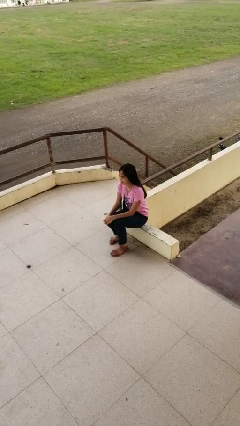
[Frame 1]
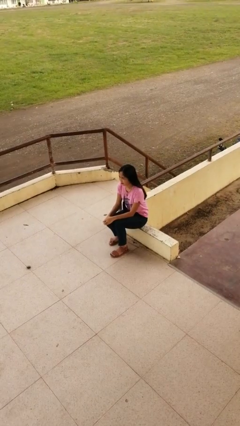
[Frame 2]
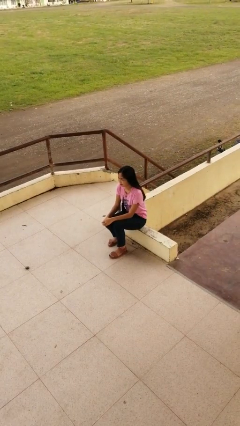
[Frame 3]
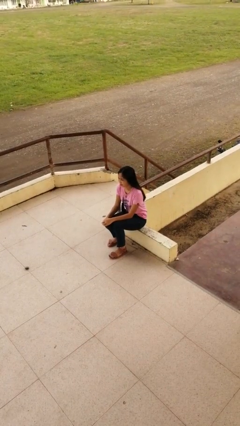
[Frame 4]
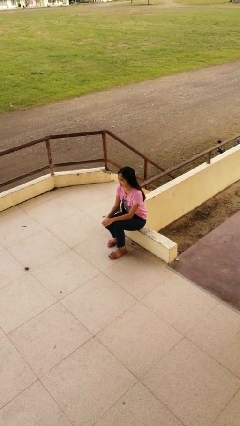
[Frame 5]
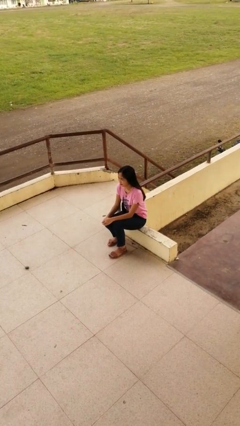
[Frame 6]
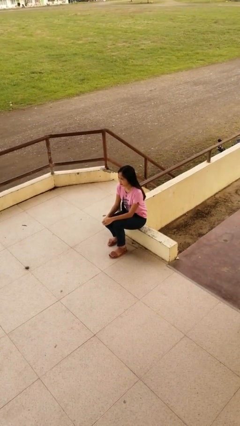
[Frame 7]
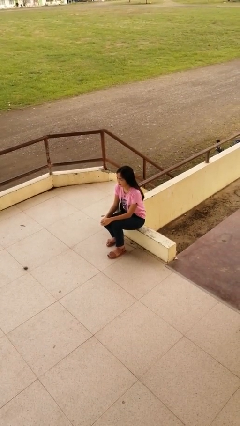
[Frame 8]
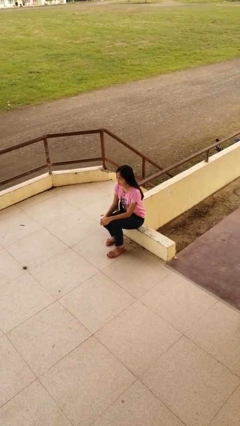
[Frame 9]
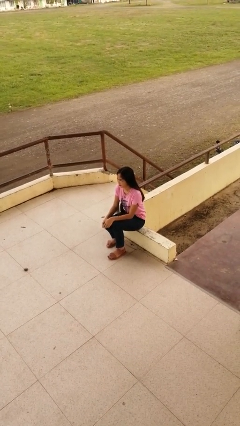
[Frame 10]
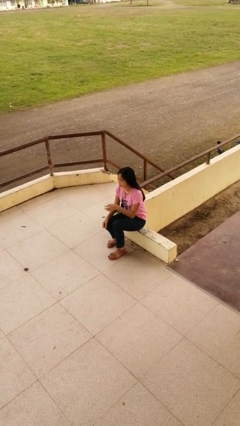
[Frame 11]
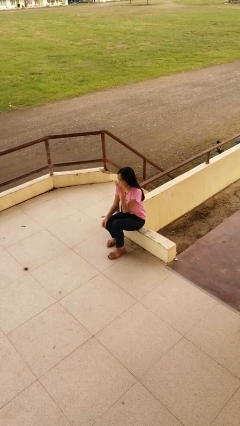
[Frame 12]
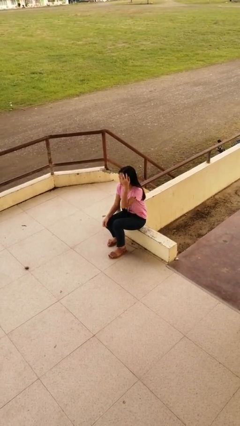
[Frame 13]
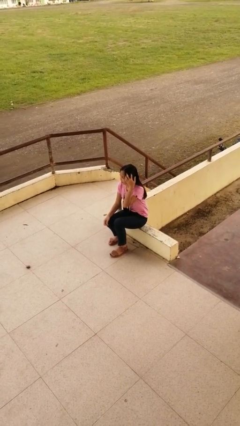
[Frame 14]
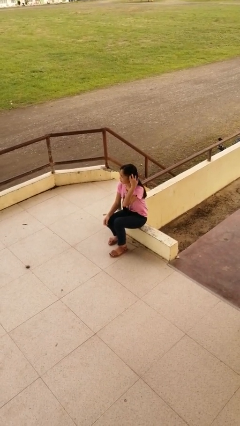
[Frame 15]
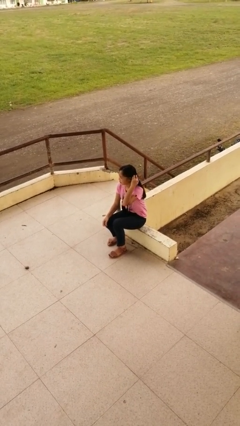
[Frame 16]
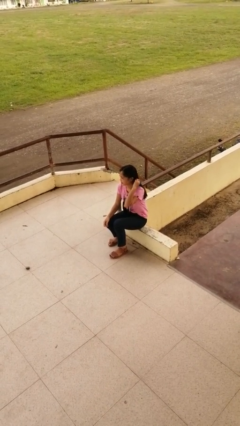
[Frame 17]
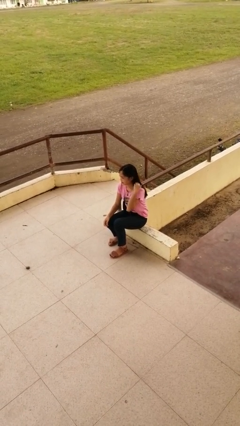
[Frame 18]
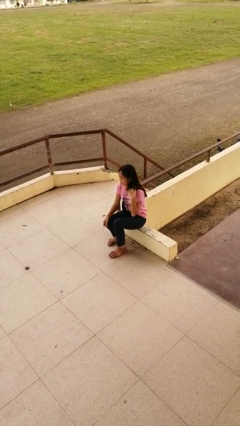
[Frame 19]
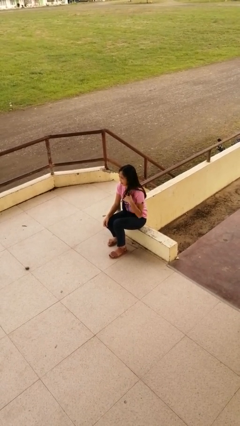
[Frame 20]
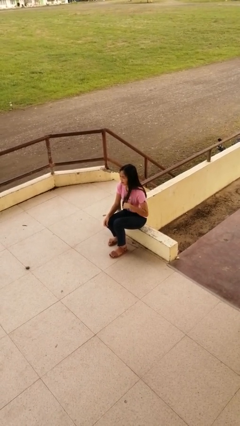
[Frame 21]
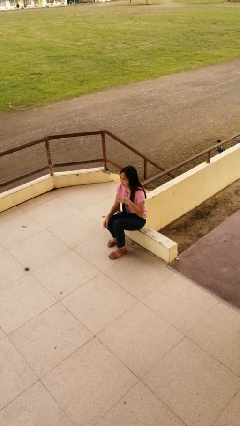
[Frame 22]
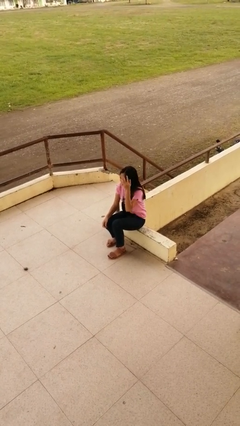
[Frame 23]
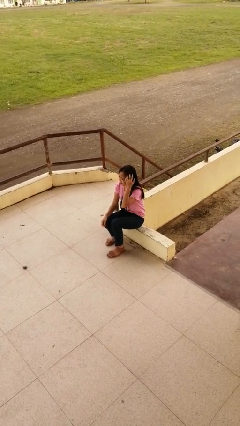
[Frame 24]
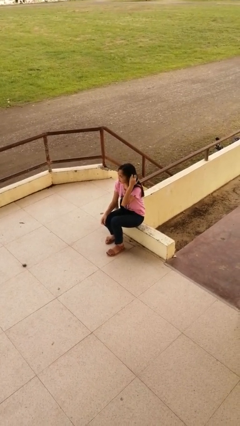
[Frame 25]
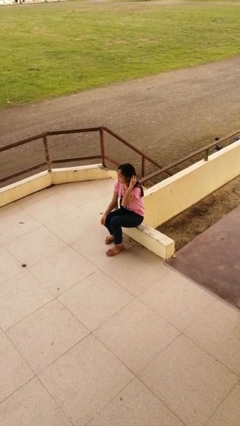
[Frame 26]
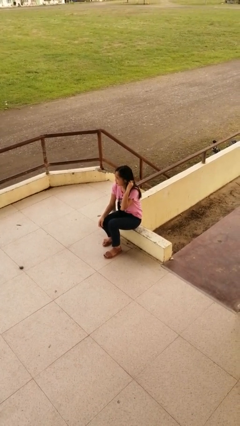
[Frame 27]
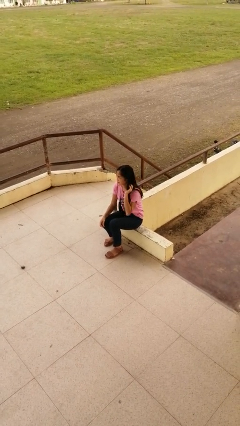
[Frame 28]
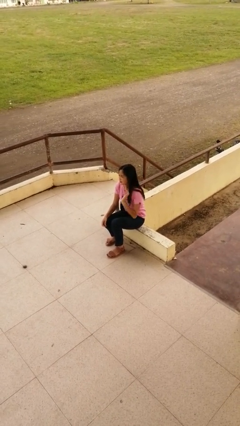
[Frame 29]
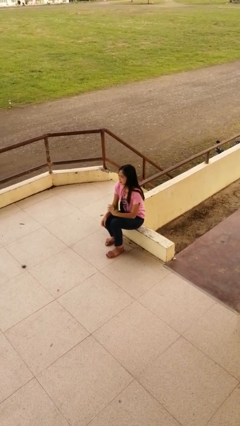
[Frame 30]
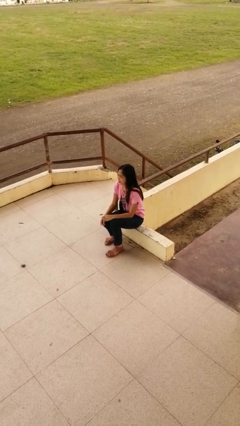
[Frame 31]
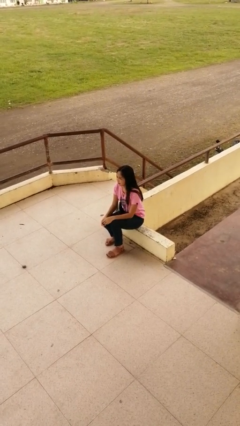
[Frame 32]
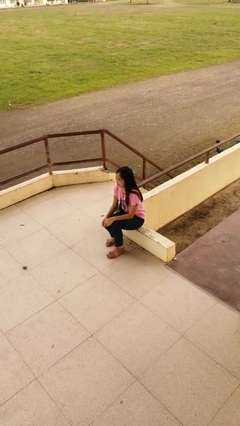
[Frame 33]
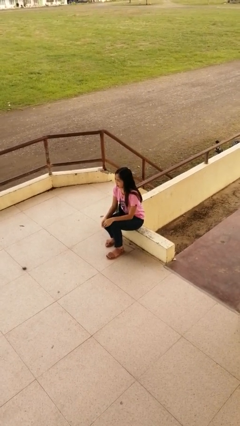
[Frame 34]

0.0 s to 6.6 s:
person strokes hair

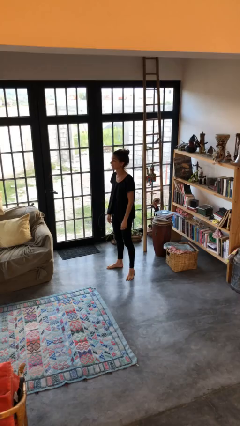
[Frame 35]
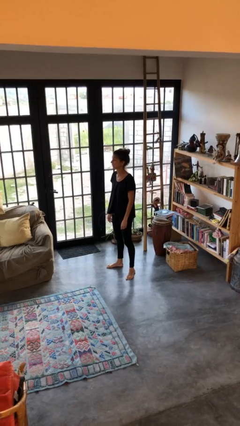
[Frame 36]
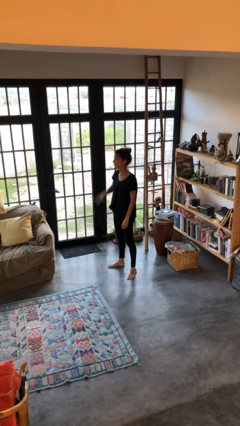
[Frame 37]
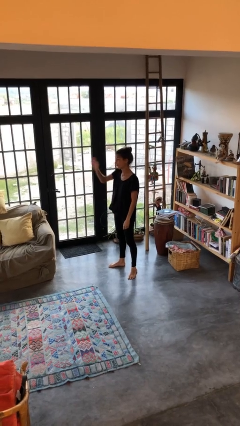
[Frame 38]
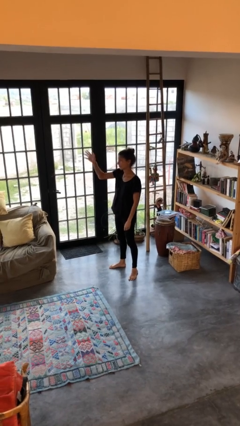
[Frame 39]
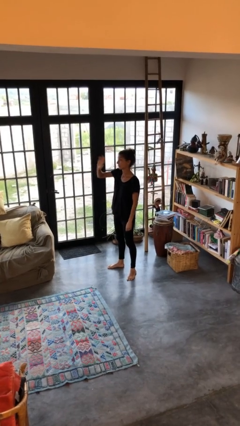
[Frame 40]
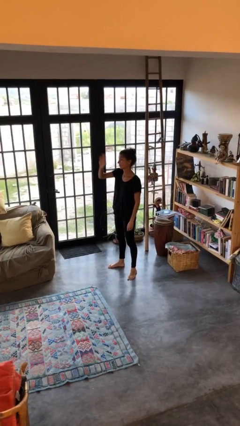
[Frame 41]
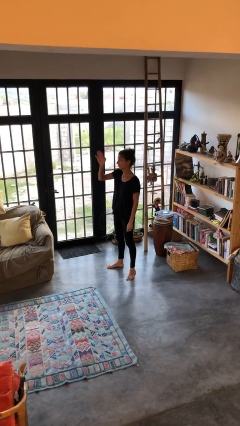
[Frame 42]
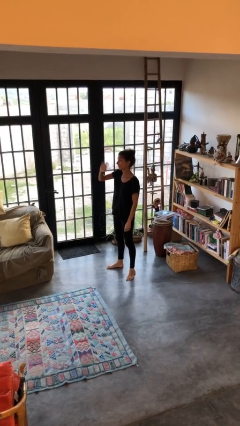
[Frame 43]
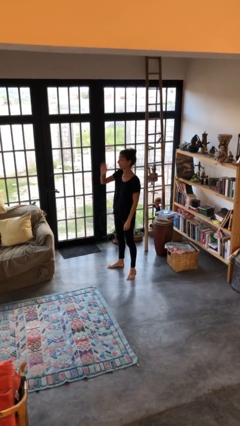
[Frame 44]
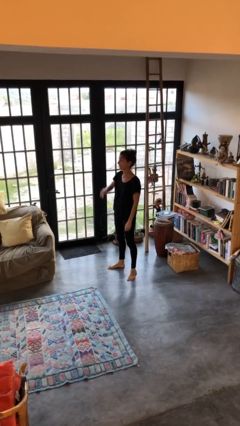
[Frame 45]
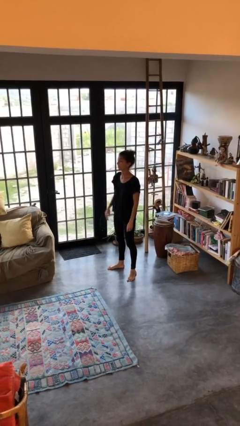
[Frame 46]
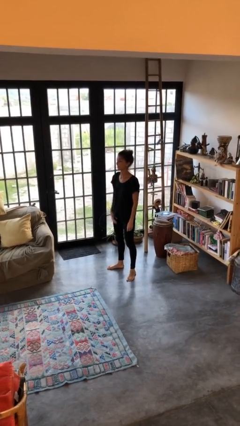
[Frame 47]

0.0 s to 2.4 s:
person waves at person

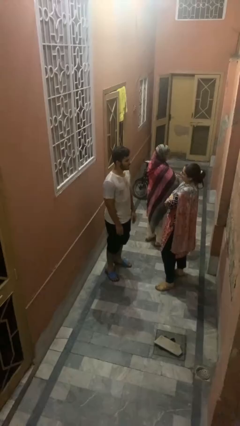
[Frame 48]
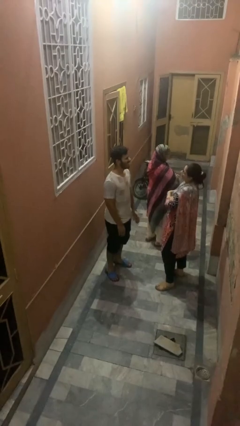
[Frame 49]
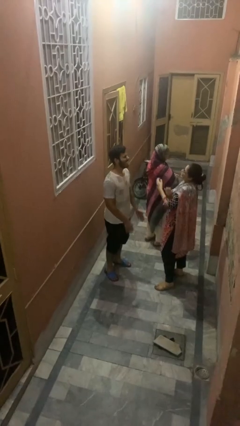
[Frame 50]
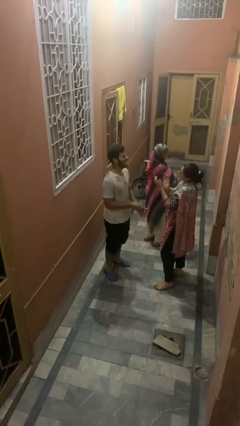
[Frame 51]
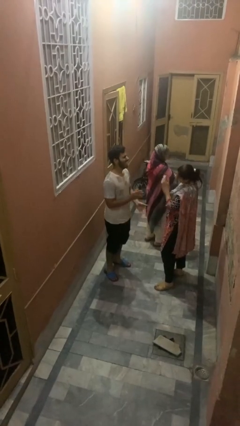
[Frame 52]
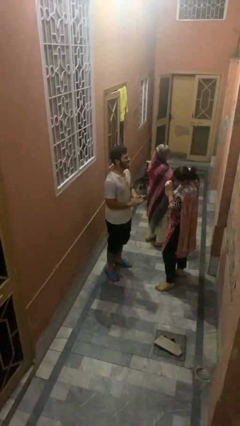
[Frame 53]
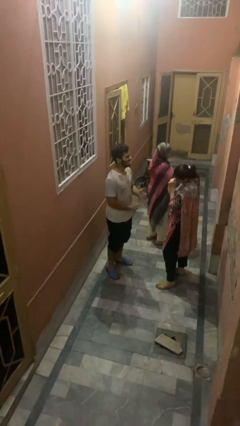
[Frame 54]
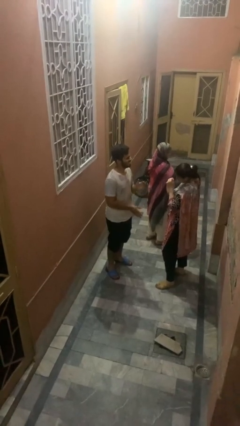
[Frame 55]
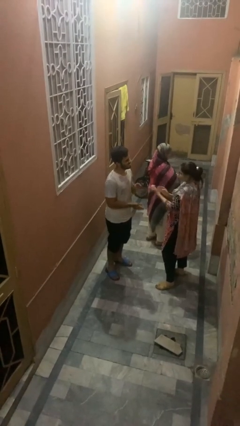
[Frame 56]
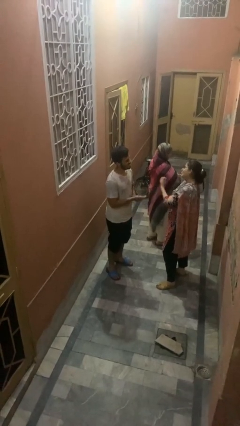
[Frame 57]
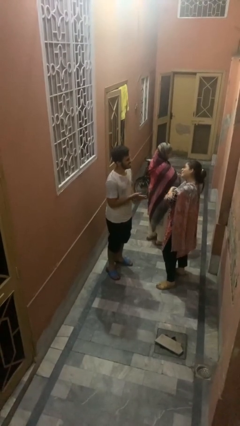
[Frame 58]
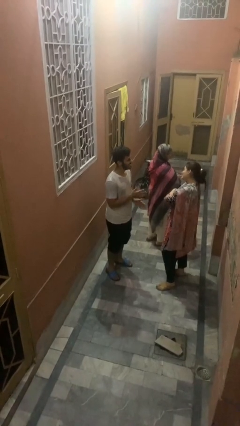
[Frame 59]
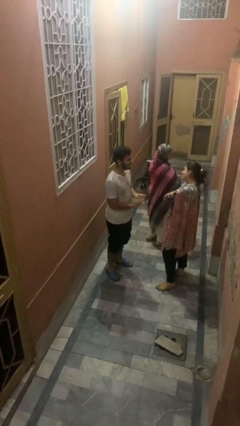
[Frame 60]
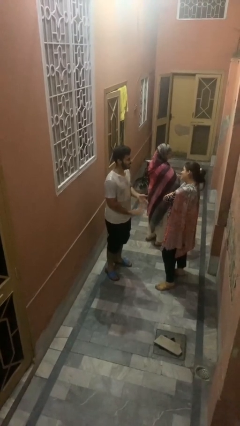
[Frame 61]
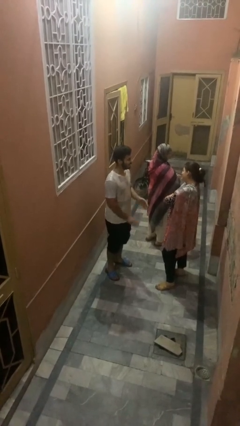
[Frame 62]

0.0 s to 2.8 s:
person laughs with person

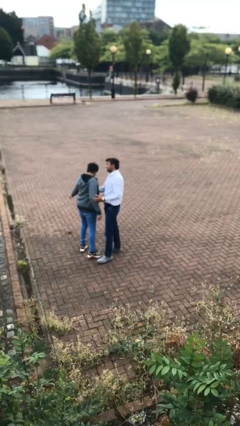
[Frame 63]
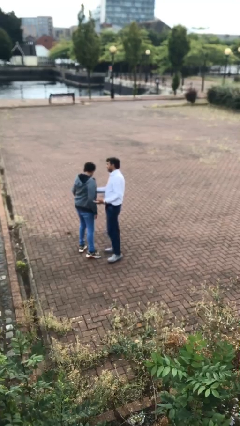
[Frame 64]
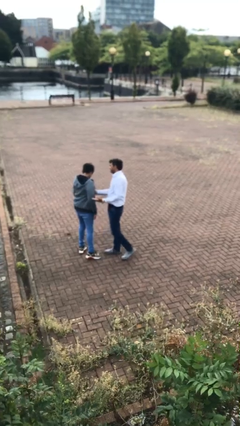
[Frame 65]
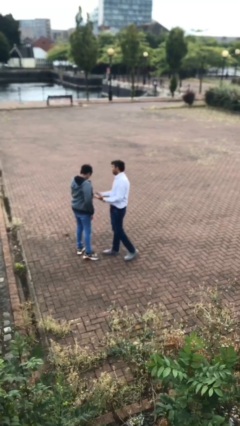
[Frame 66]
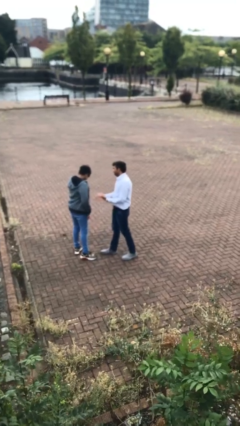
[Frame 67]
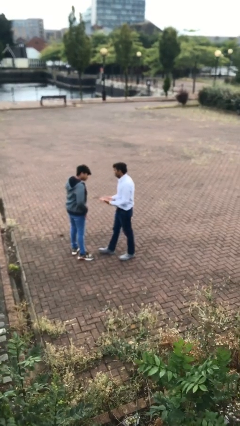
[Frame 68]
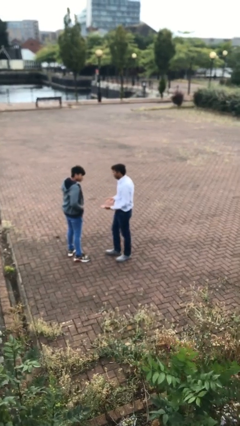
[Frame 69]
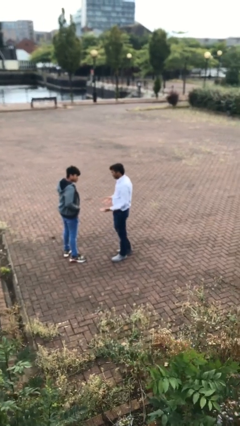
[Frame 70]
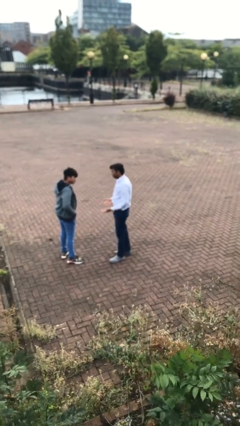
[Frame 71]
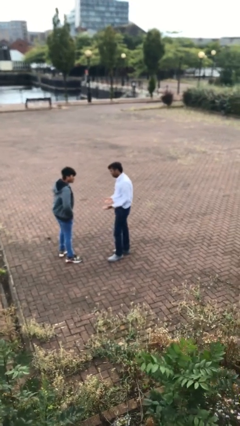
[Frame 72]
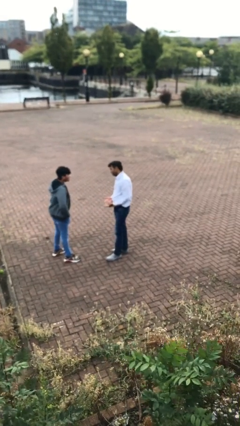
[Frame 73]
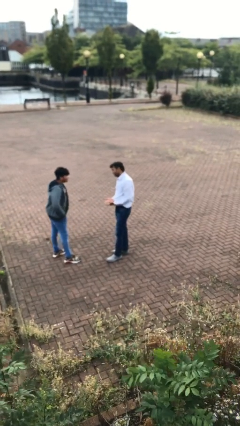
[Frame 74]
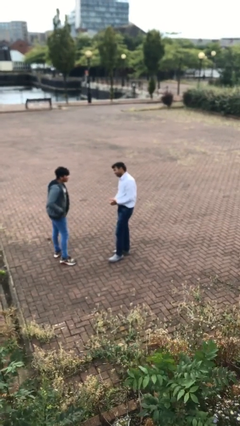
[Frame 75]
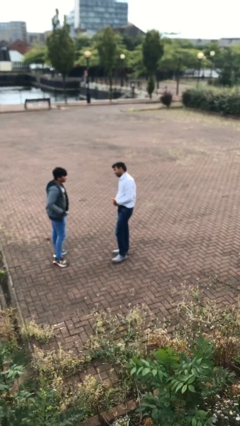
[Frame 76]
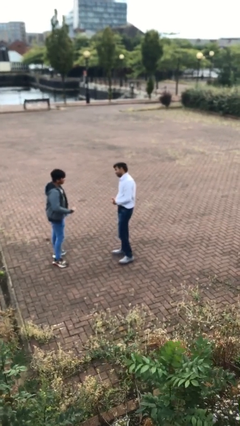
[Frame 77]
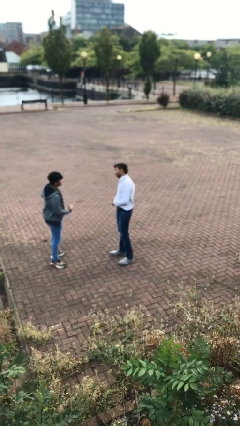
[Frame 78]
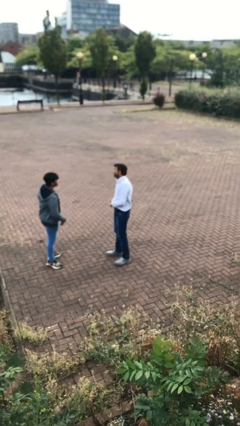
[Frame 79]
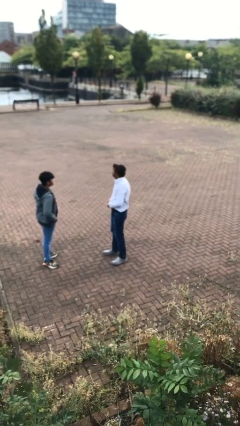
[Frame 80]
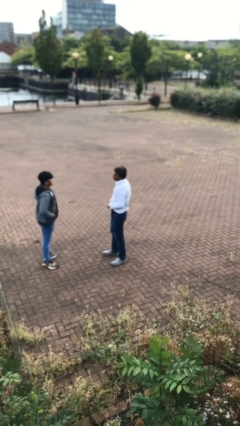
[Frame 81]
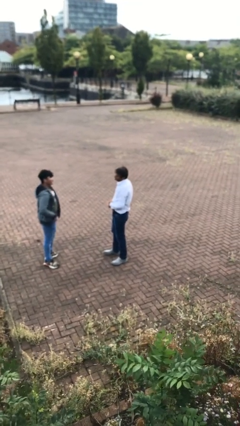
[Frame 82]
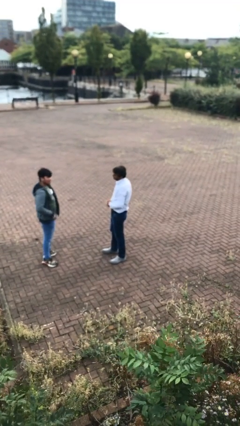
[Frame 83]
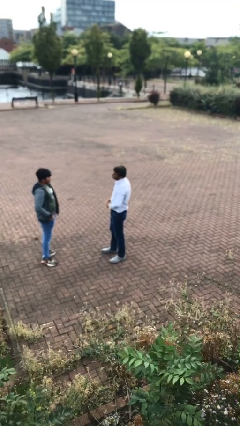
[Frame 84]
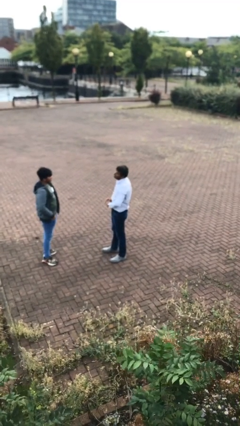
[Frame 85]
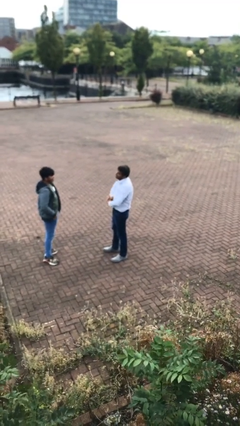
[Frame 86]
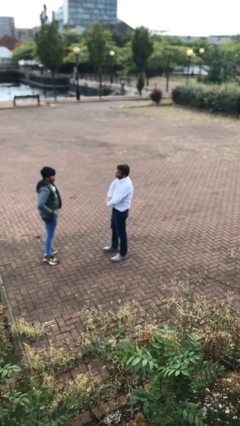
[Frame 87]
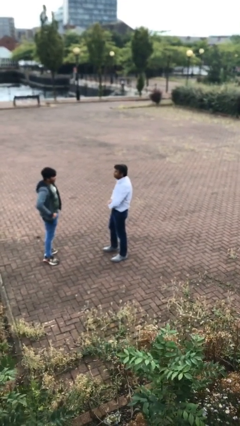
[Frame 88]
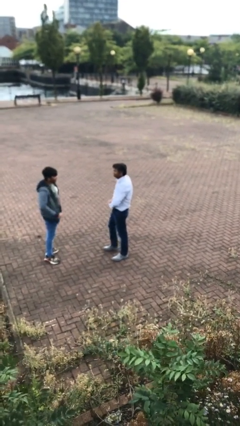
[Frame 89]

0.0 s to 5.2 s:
person talks to person

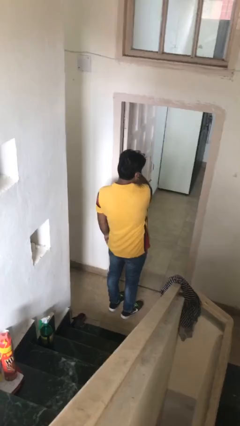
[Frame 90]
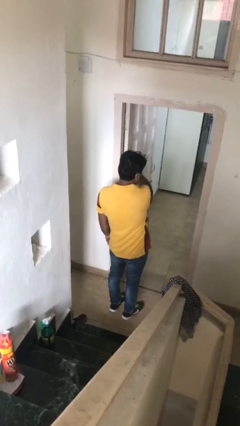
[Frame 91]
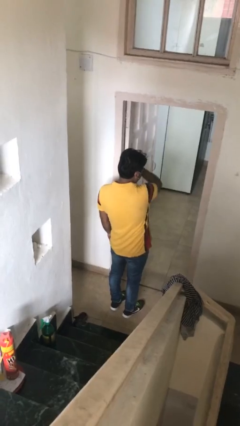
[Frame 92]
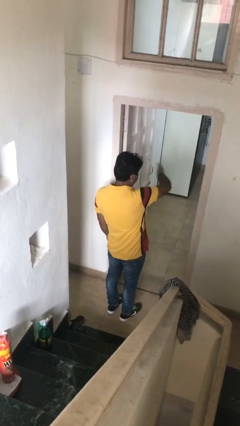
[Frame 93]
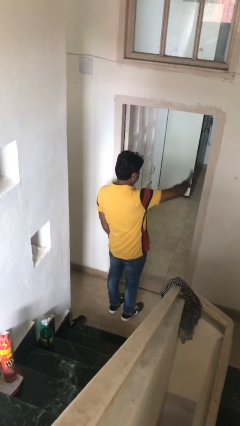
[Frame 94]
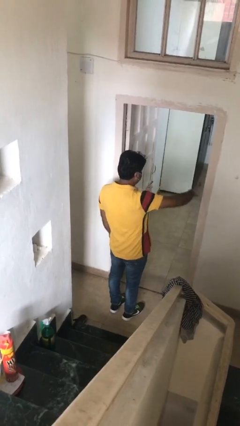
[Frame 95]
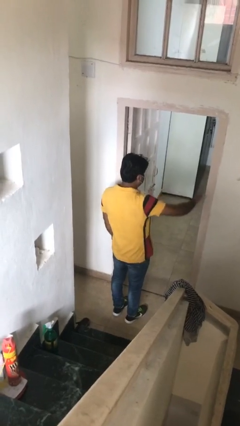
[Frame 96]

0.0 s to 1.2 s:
person gestures swipe right
